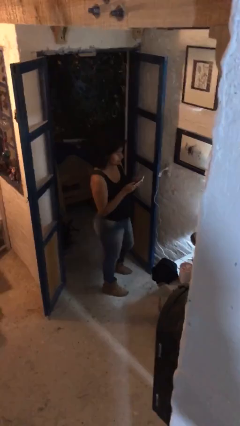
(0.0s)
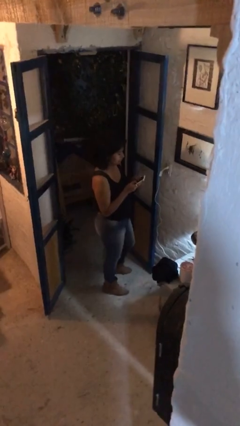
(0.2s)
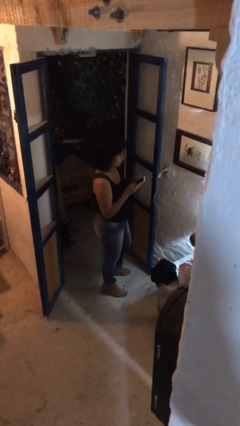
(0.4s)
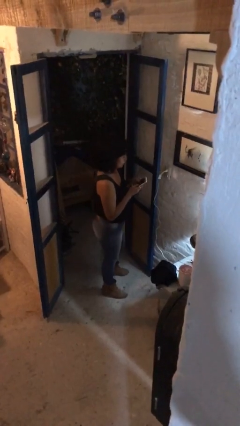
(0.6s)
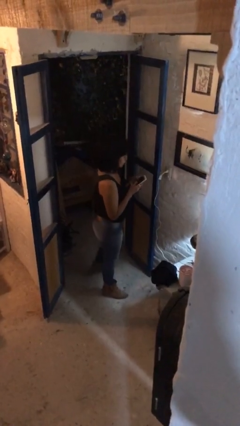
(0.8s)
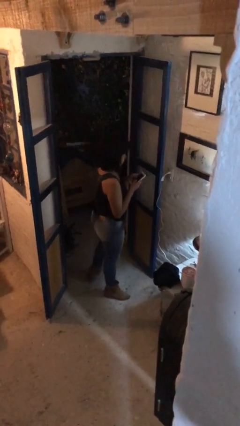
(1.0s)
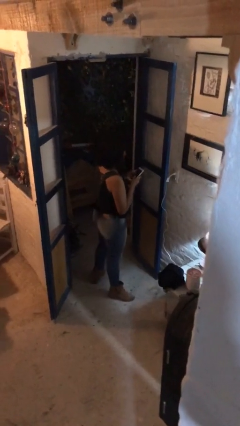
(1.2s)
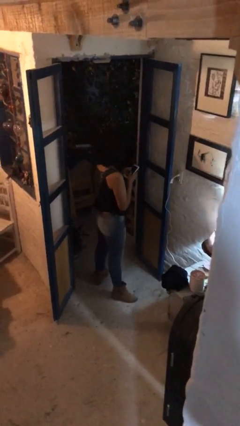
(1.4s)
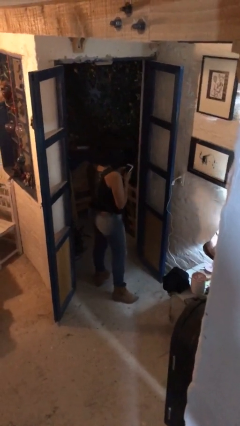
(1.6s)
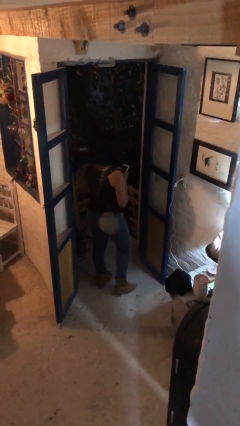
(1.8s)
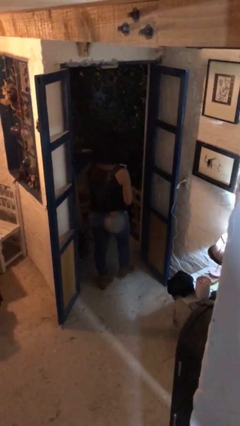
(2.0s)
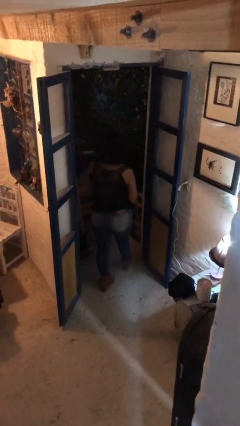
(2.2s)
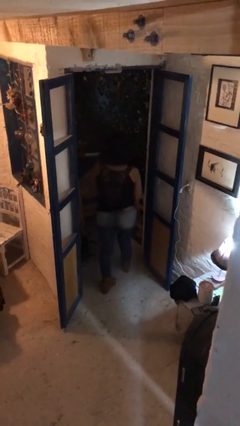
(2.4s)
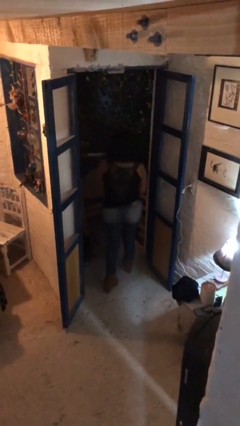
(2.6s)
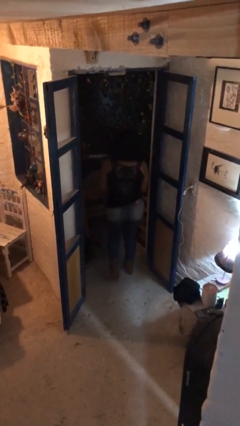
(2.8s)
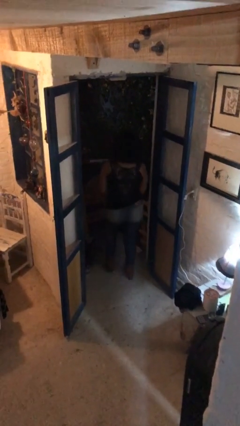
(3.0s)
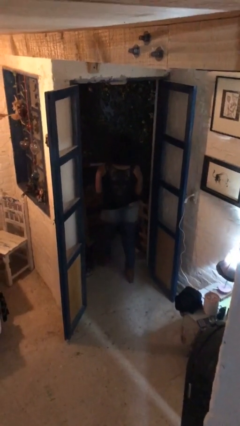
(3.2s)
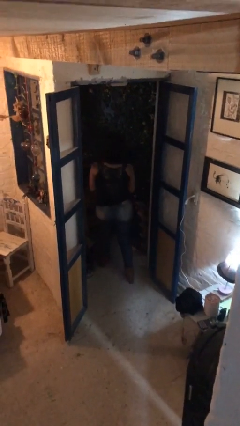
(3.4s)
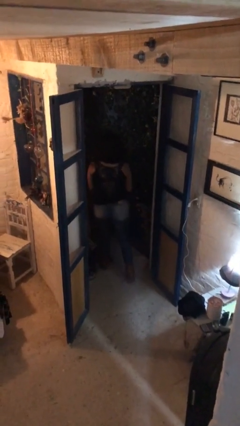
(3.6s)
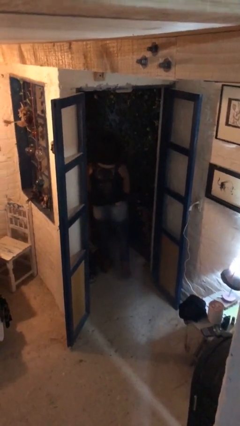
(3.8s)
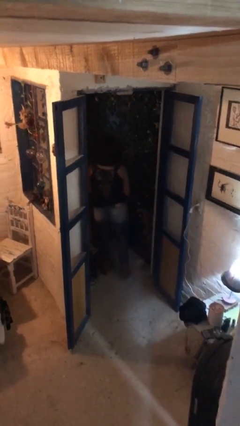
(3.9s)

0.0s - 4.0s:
person exits scene through structure

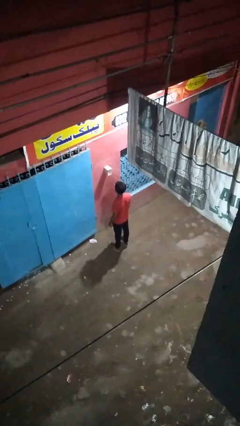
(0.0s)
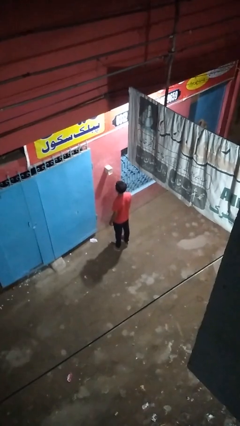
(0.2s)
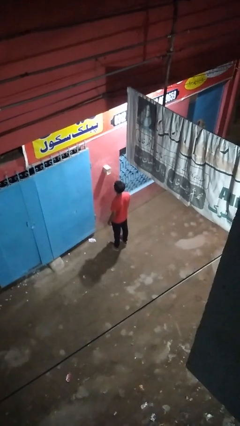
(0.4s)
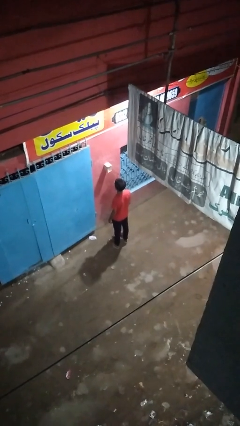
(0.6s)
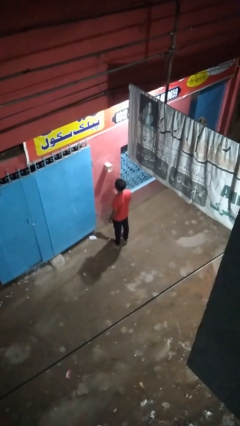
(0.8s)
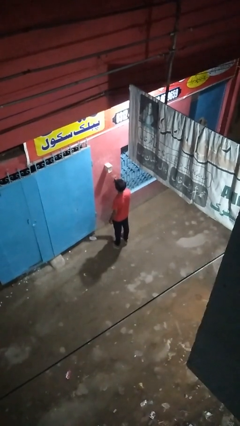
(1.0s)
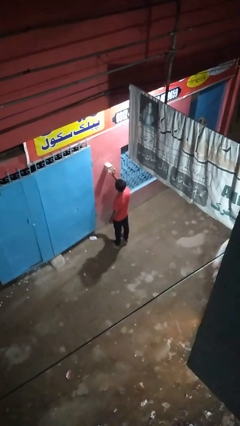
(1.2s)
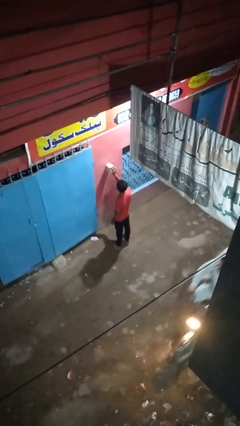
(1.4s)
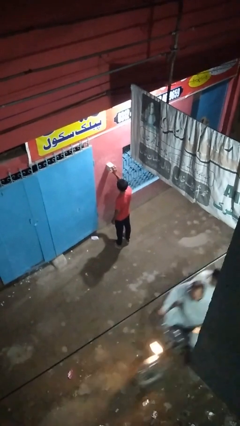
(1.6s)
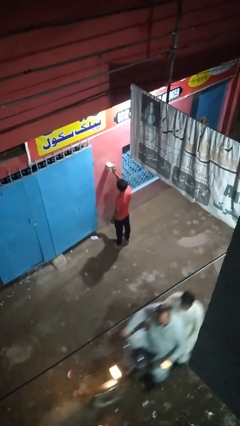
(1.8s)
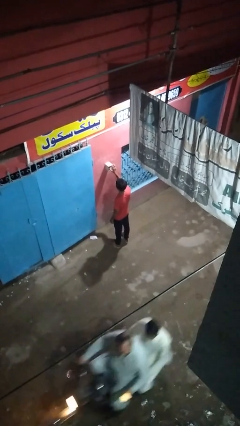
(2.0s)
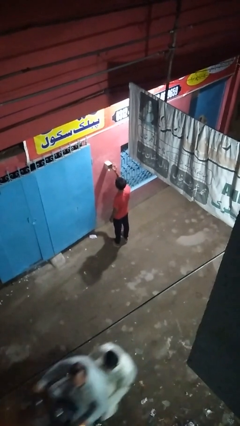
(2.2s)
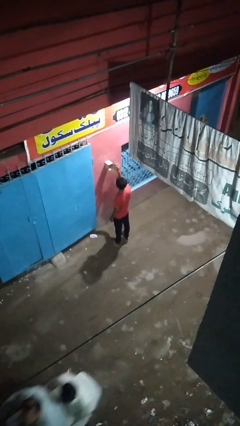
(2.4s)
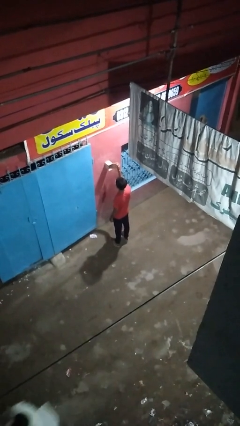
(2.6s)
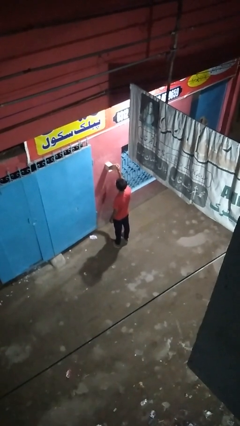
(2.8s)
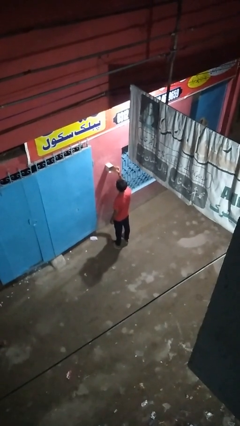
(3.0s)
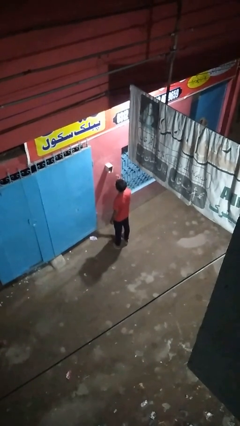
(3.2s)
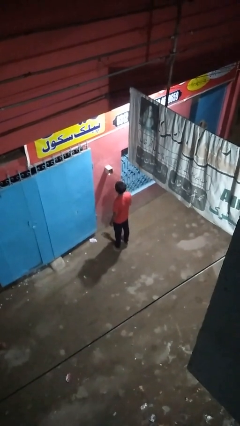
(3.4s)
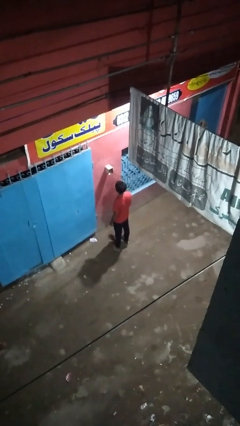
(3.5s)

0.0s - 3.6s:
person opens mailbox

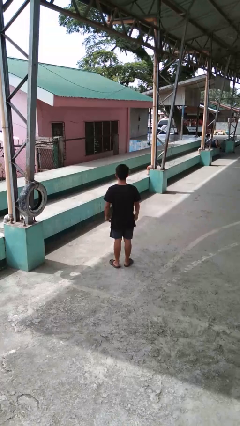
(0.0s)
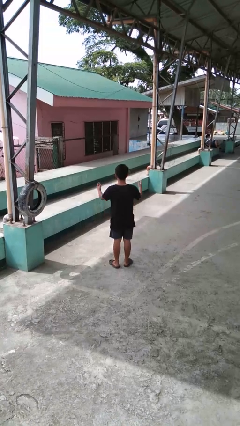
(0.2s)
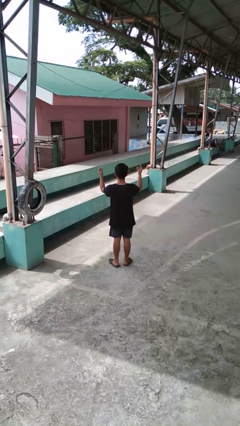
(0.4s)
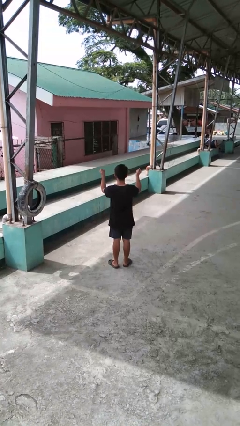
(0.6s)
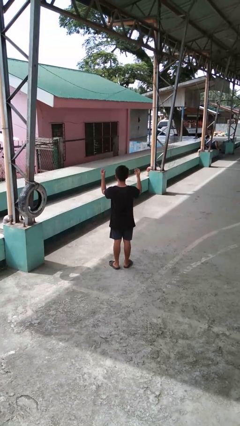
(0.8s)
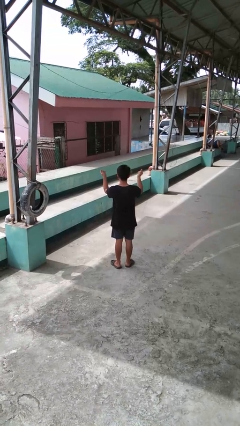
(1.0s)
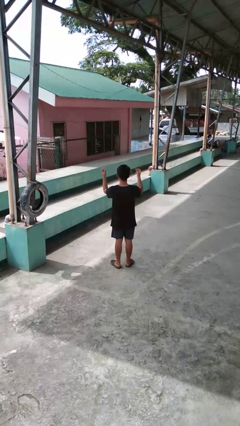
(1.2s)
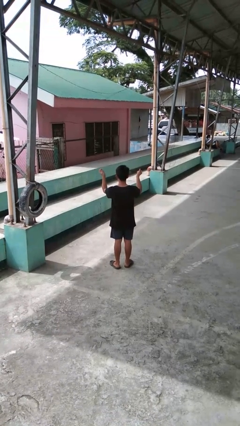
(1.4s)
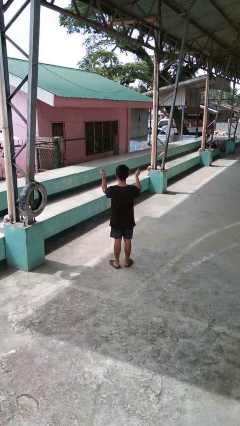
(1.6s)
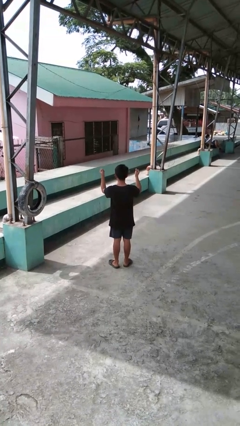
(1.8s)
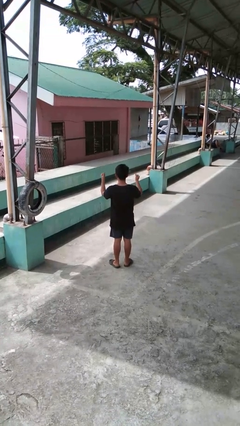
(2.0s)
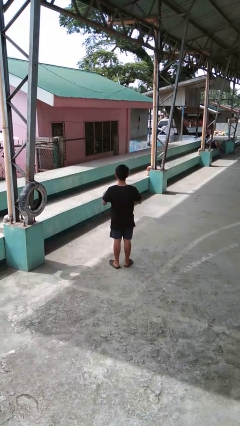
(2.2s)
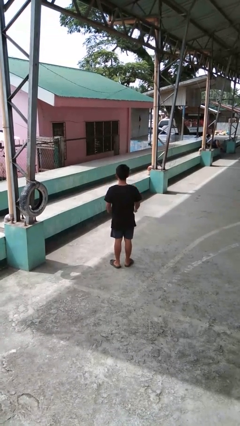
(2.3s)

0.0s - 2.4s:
person snaps fingers

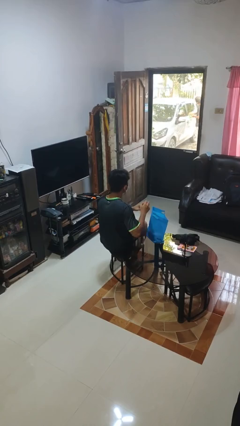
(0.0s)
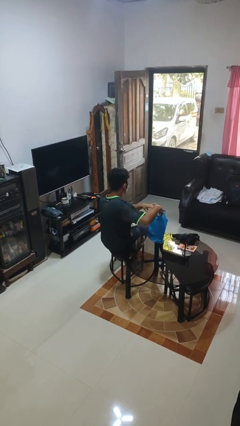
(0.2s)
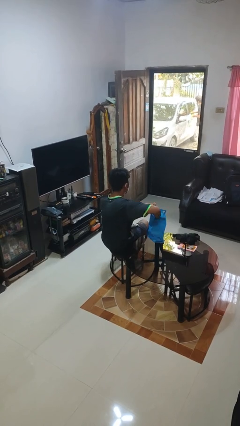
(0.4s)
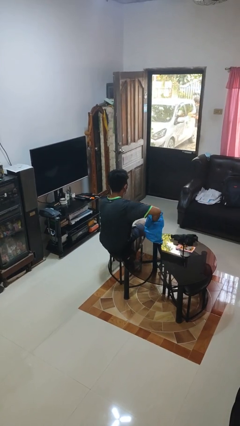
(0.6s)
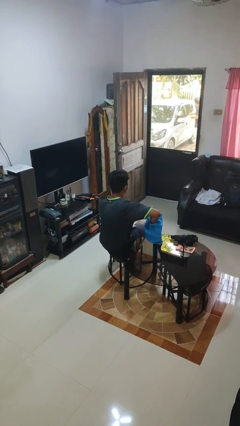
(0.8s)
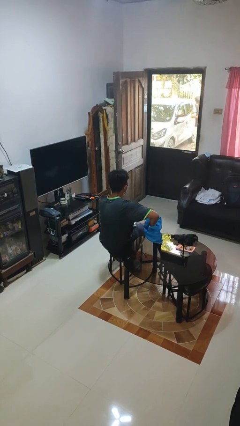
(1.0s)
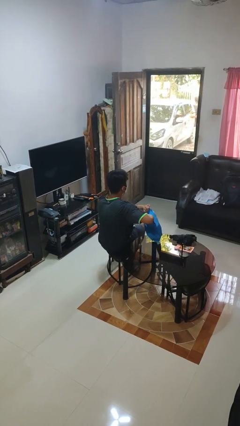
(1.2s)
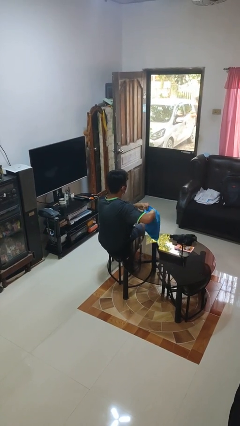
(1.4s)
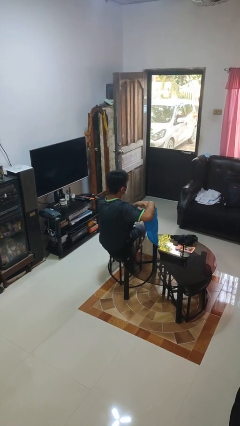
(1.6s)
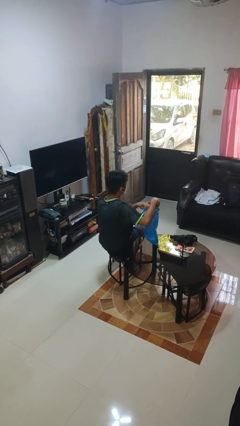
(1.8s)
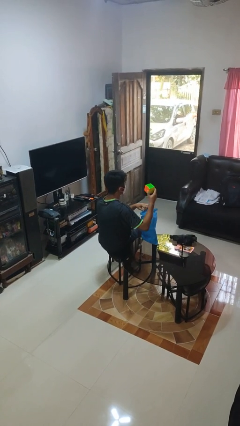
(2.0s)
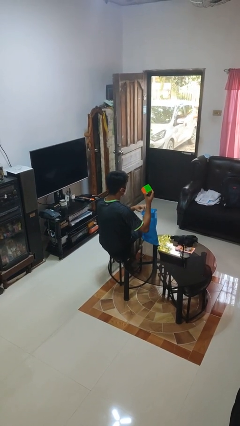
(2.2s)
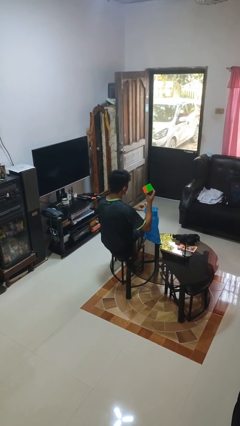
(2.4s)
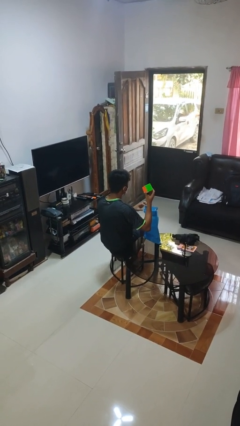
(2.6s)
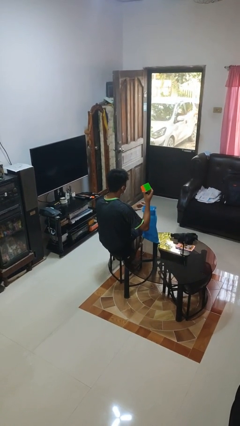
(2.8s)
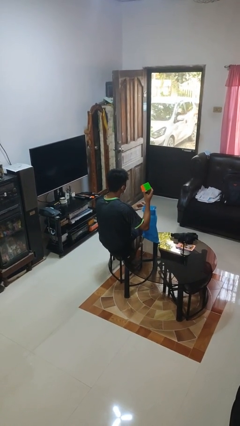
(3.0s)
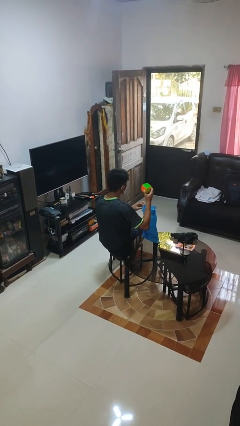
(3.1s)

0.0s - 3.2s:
person takes object from bag

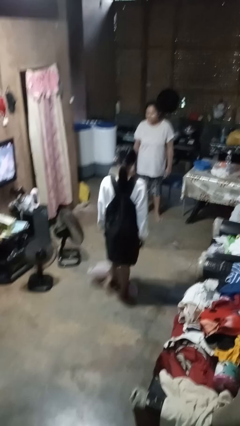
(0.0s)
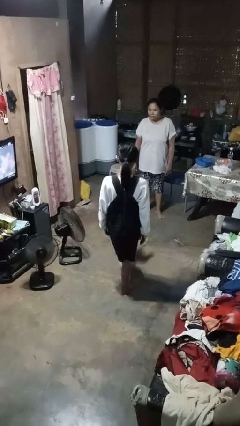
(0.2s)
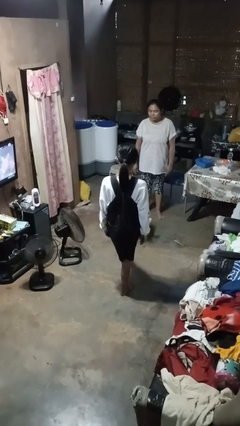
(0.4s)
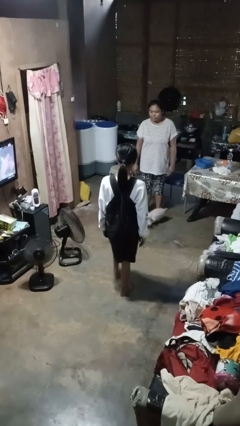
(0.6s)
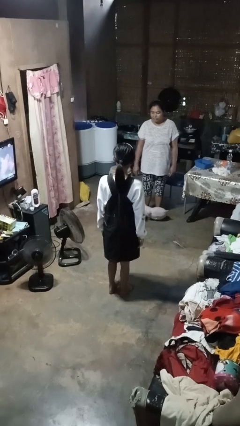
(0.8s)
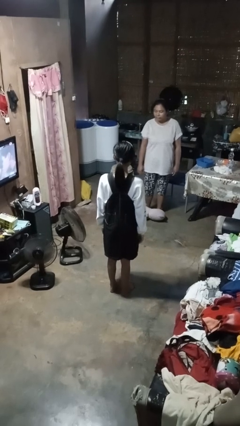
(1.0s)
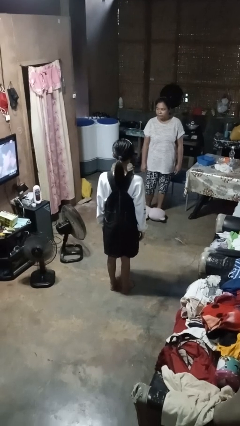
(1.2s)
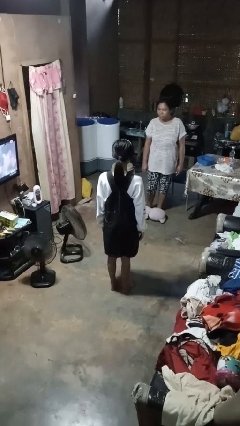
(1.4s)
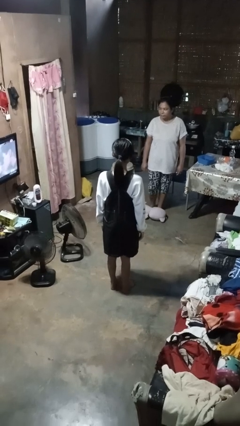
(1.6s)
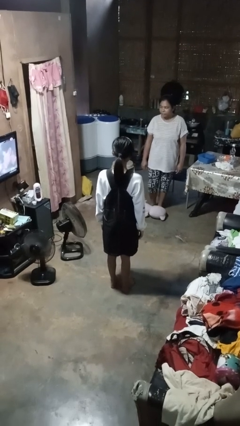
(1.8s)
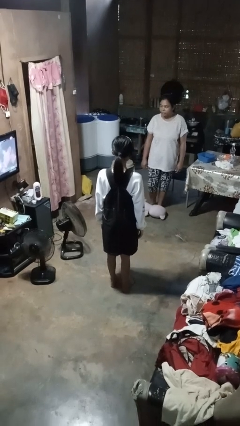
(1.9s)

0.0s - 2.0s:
person kicks object to person

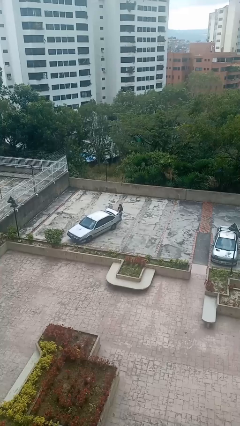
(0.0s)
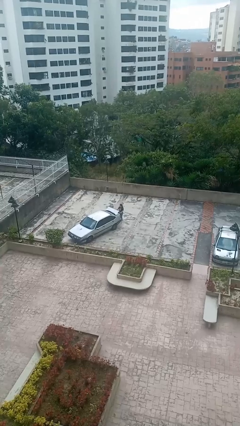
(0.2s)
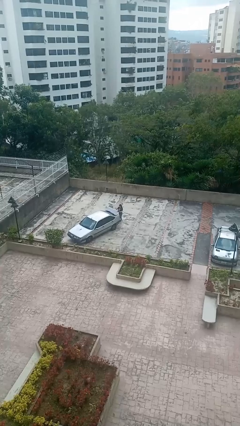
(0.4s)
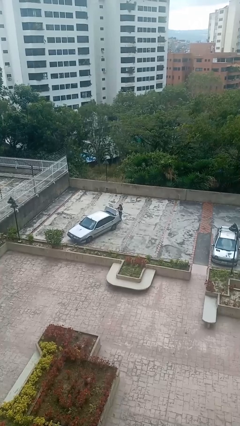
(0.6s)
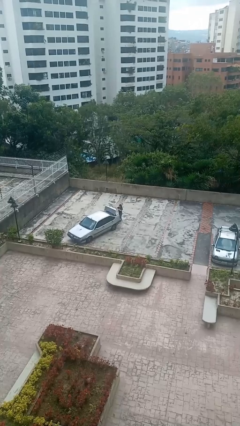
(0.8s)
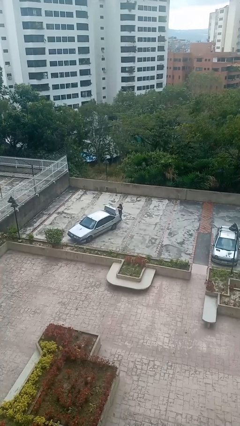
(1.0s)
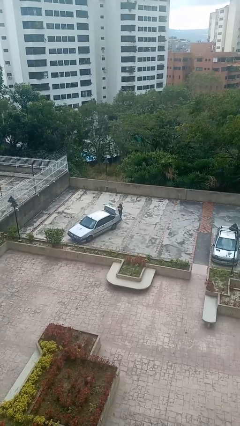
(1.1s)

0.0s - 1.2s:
person opens car trunk

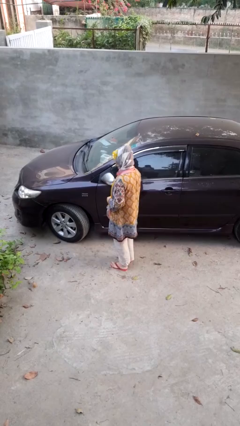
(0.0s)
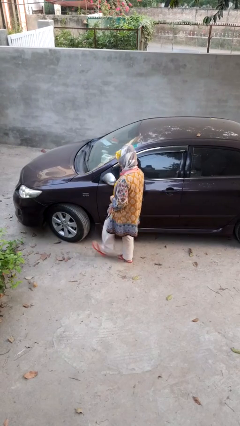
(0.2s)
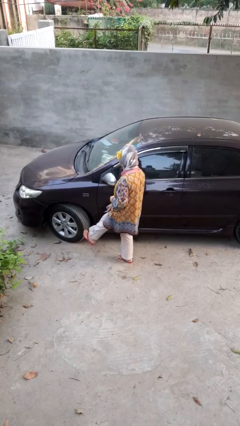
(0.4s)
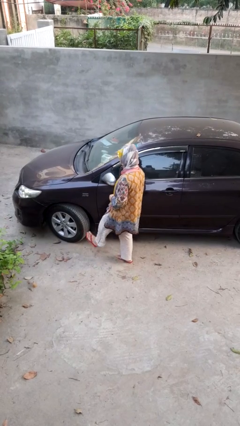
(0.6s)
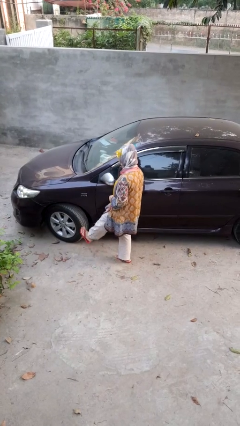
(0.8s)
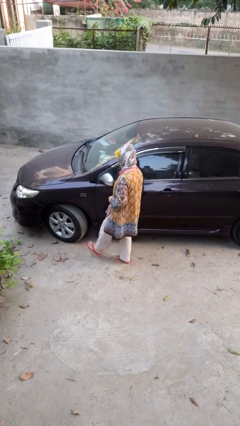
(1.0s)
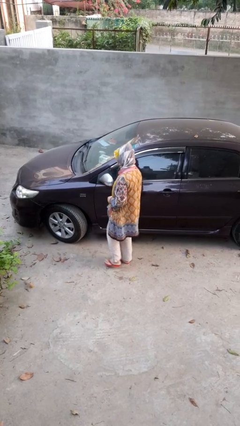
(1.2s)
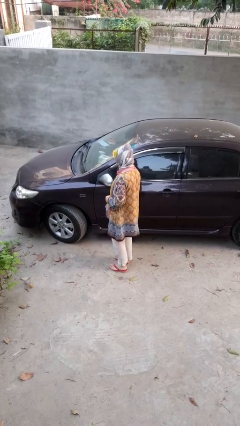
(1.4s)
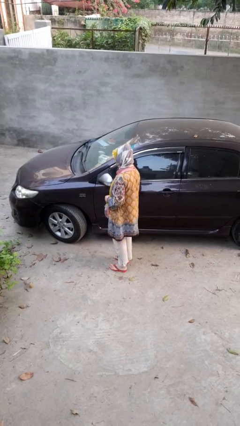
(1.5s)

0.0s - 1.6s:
person kicks car tires
